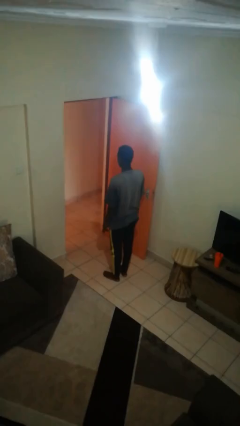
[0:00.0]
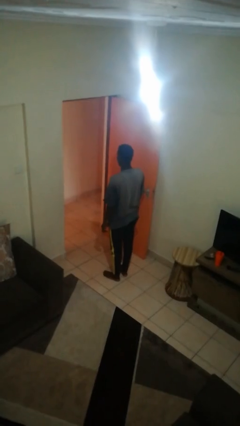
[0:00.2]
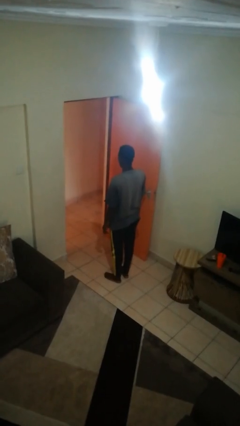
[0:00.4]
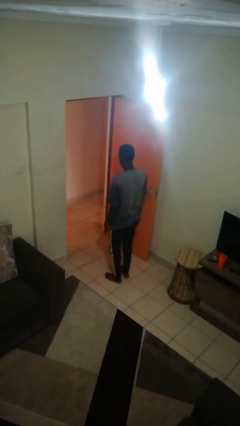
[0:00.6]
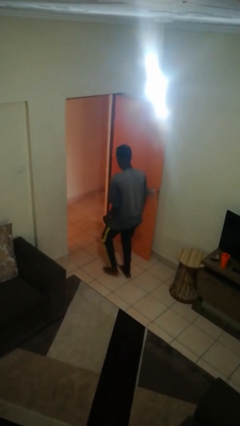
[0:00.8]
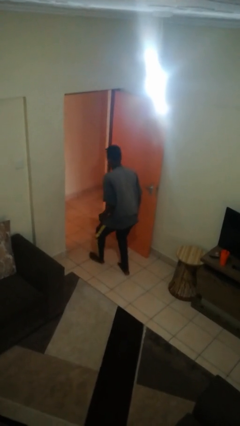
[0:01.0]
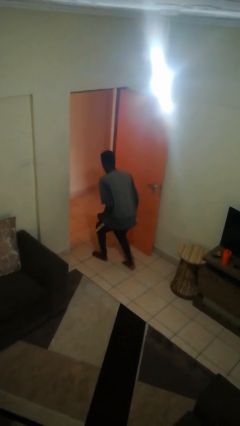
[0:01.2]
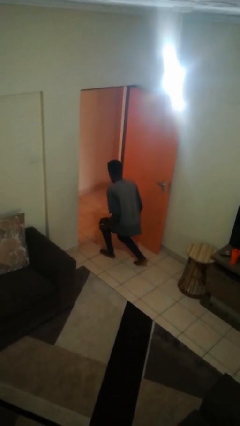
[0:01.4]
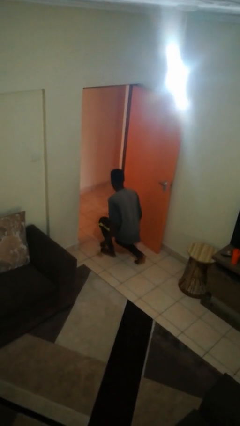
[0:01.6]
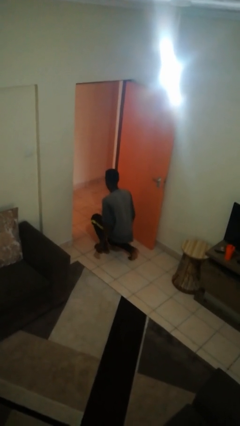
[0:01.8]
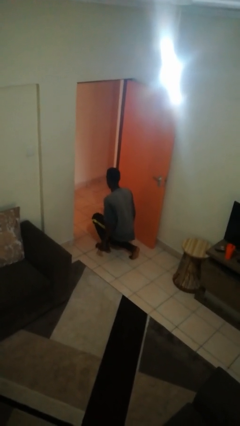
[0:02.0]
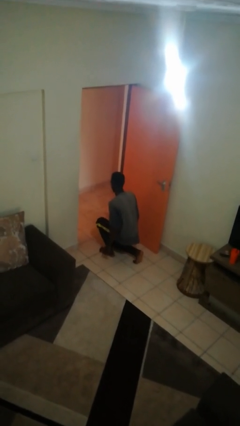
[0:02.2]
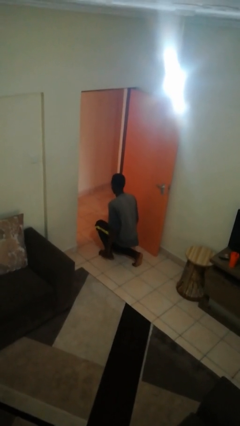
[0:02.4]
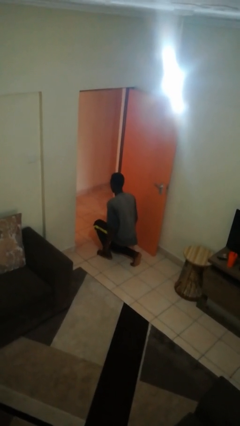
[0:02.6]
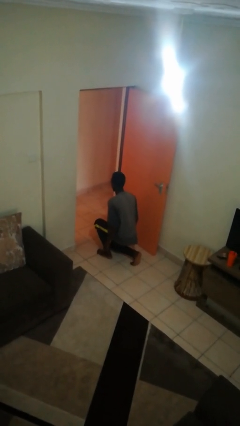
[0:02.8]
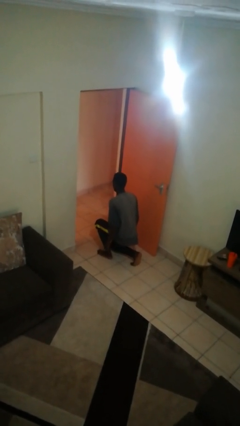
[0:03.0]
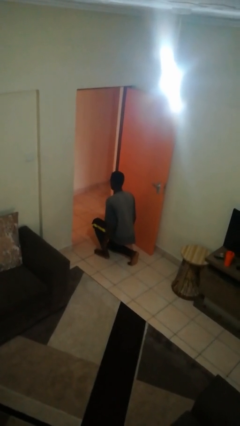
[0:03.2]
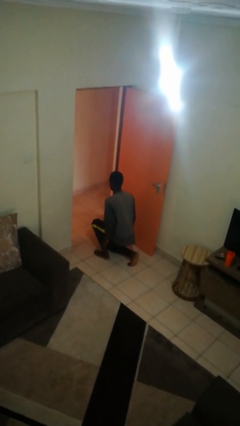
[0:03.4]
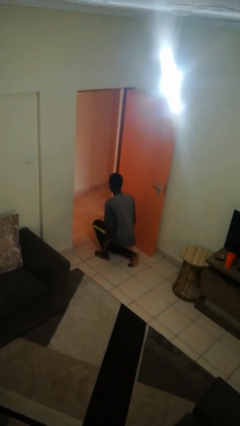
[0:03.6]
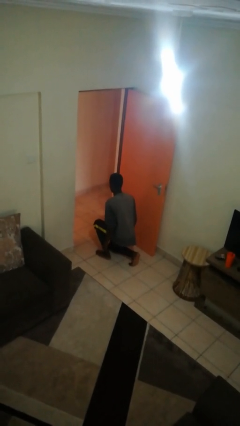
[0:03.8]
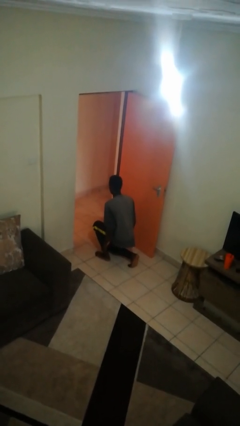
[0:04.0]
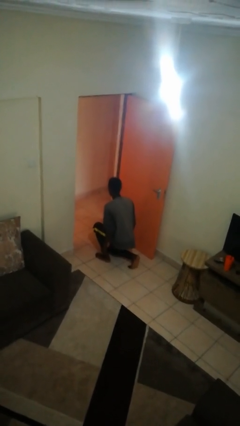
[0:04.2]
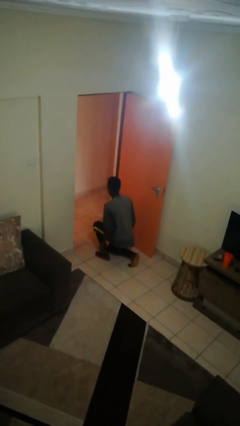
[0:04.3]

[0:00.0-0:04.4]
person kneels

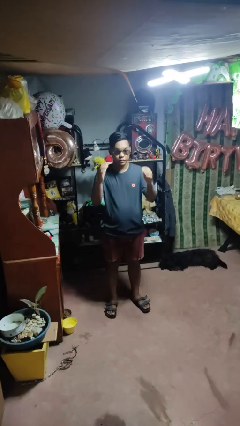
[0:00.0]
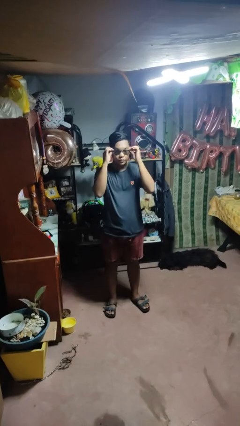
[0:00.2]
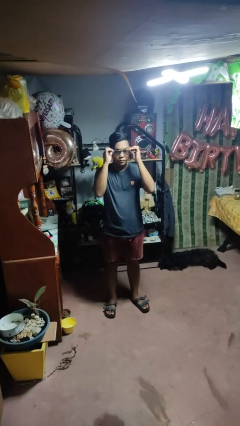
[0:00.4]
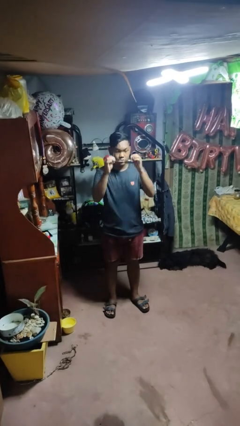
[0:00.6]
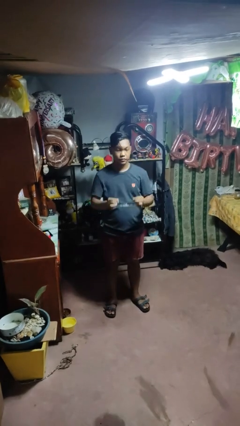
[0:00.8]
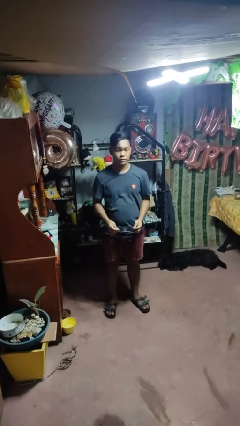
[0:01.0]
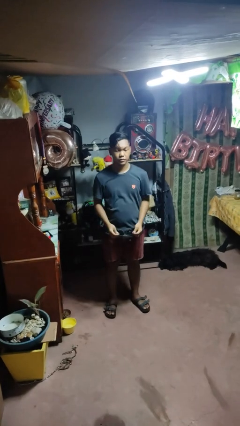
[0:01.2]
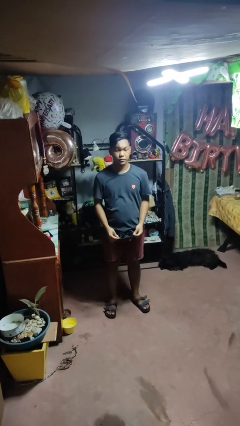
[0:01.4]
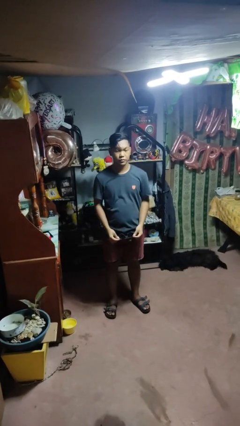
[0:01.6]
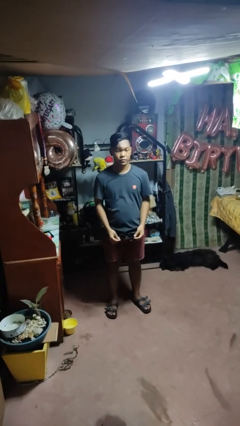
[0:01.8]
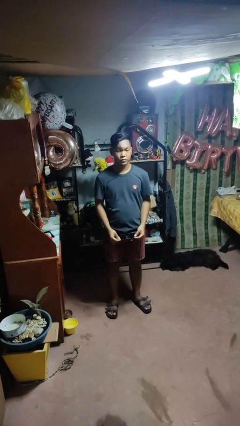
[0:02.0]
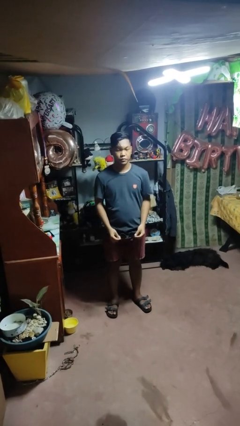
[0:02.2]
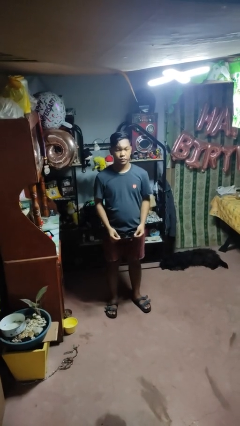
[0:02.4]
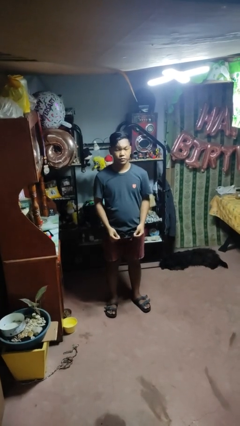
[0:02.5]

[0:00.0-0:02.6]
person takes off sunglasses

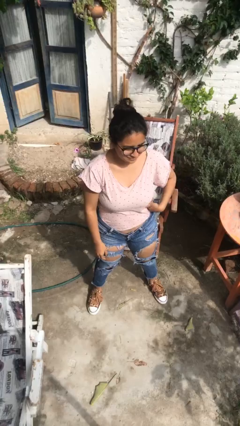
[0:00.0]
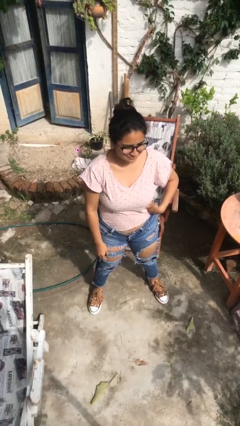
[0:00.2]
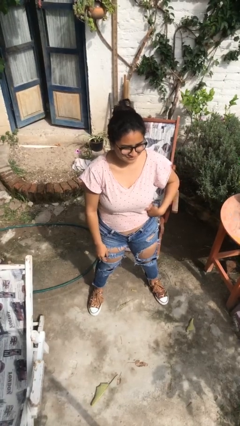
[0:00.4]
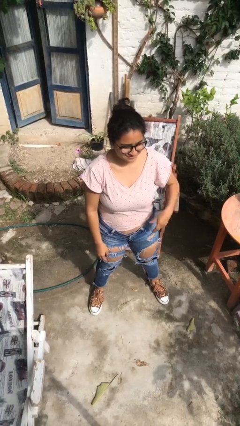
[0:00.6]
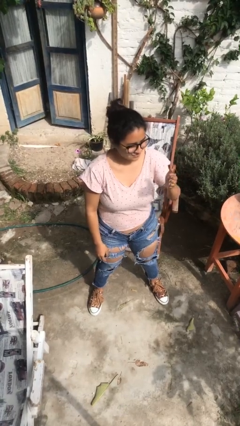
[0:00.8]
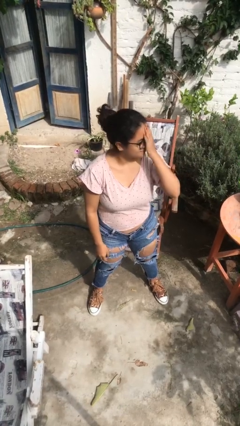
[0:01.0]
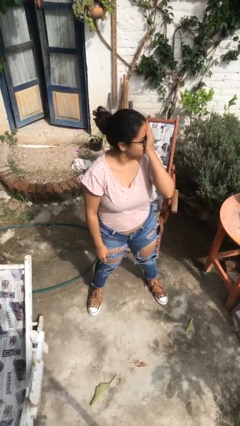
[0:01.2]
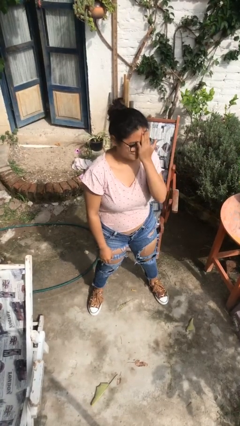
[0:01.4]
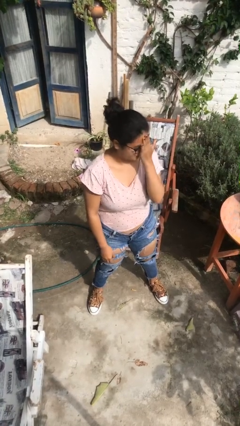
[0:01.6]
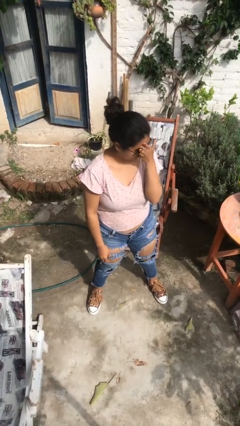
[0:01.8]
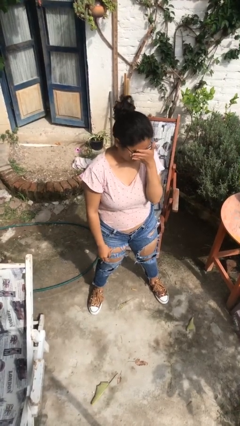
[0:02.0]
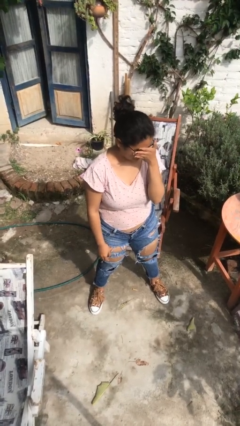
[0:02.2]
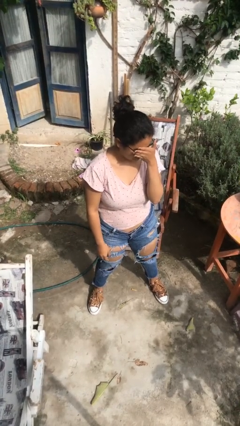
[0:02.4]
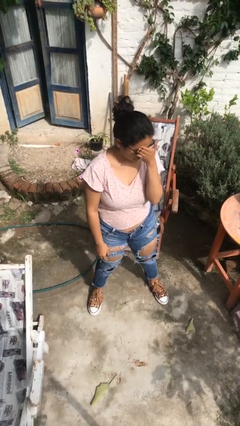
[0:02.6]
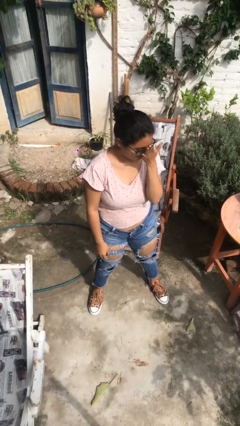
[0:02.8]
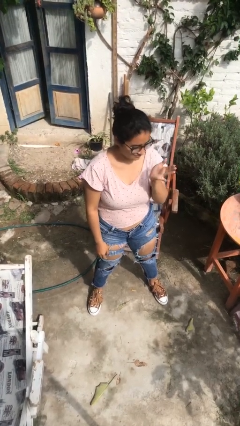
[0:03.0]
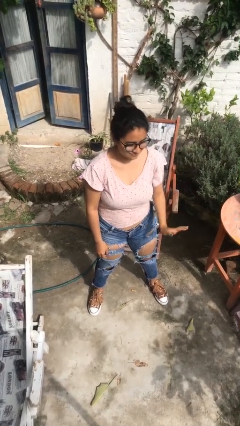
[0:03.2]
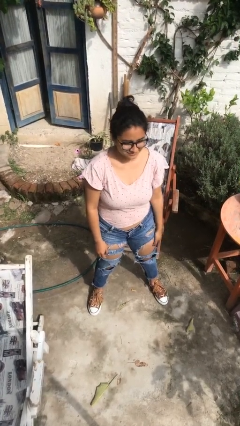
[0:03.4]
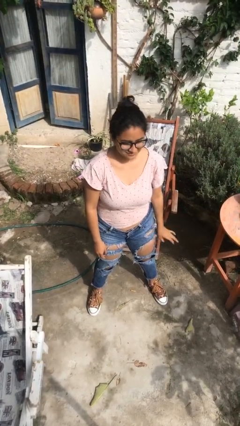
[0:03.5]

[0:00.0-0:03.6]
person covers face with hands

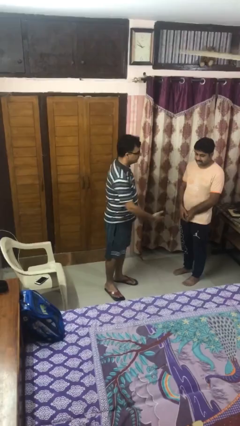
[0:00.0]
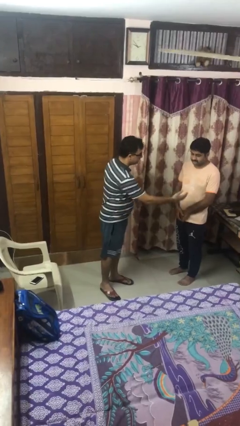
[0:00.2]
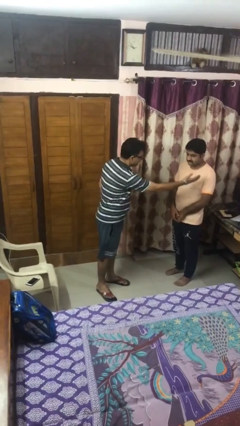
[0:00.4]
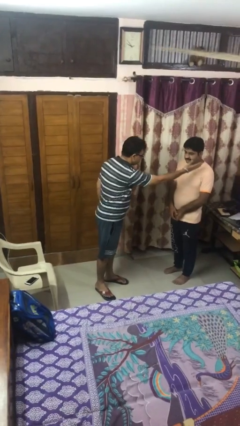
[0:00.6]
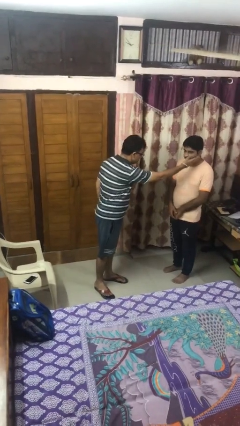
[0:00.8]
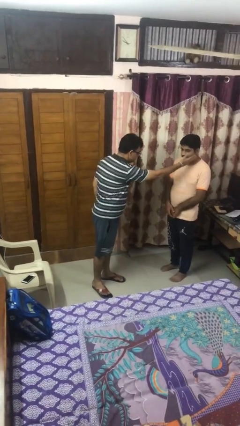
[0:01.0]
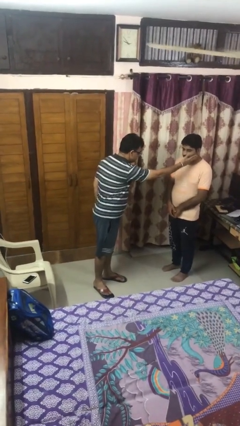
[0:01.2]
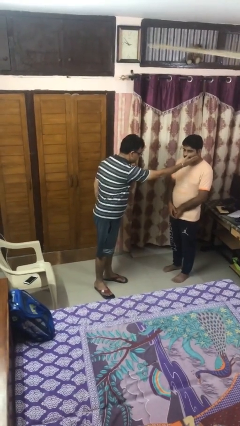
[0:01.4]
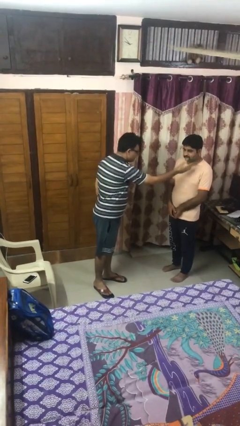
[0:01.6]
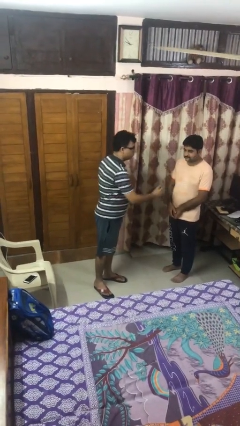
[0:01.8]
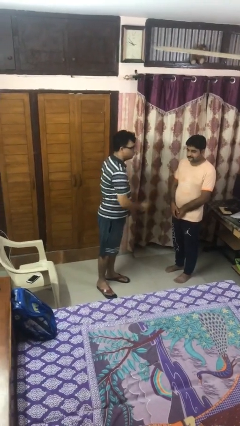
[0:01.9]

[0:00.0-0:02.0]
person touches face of person

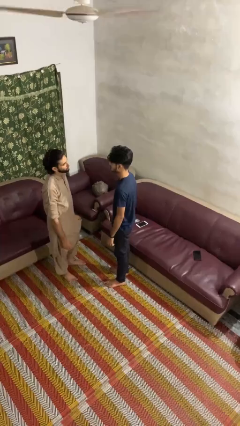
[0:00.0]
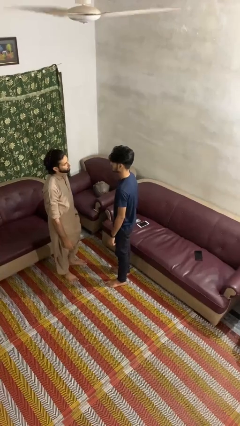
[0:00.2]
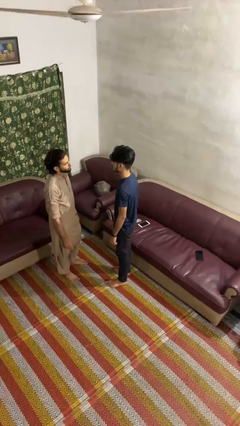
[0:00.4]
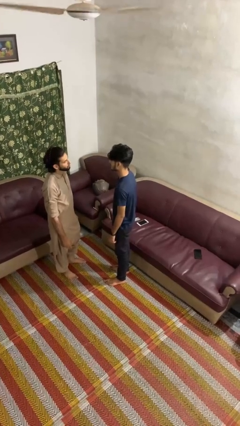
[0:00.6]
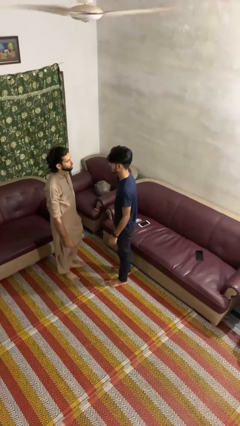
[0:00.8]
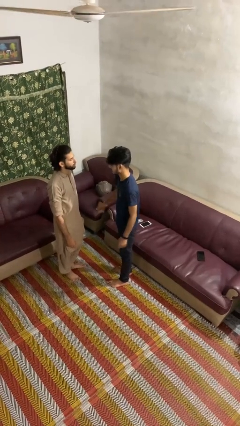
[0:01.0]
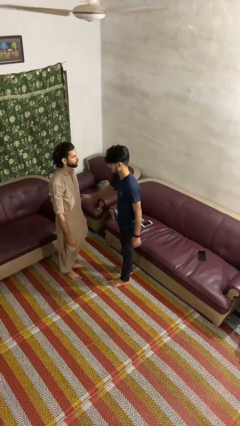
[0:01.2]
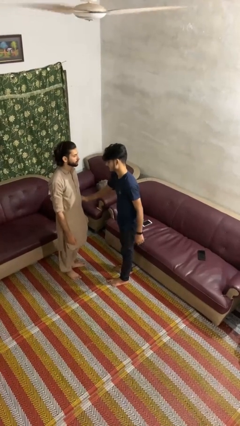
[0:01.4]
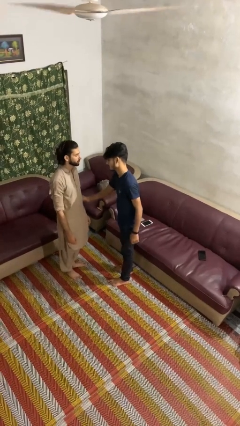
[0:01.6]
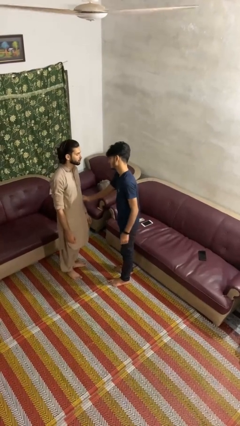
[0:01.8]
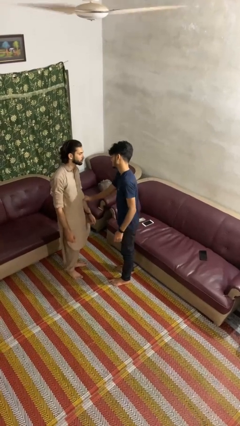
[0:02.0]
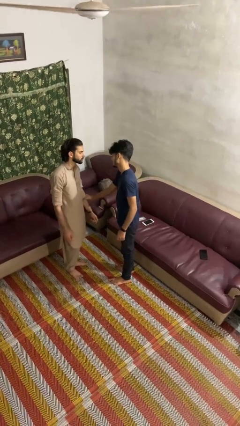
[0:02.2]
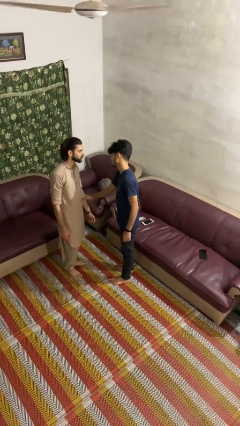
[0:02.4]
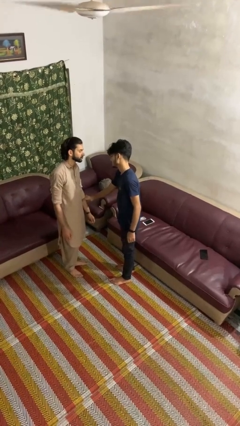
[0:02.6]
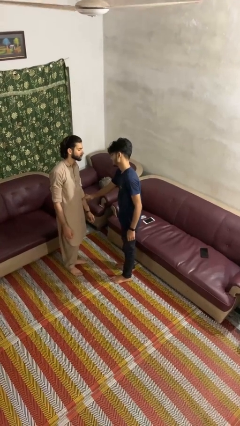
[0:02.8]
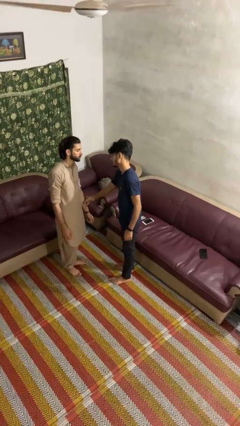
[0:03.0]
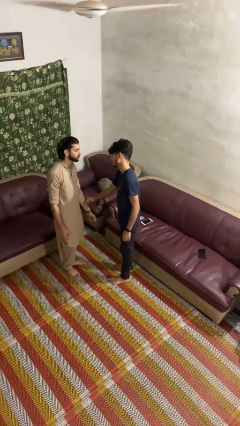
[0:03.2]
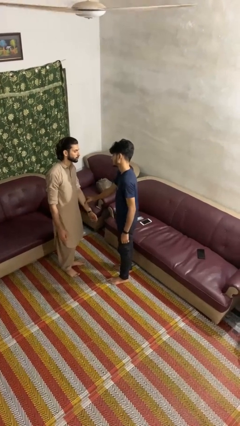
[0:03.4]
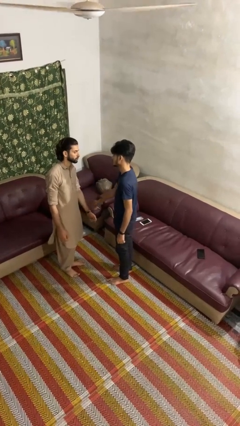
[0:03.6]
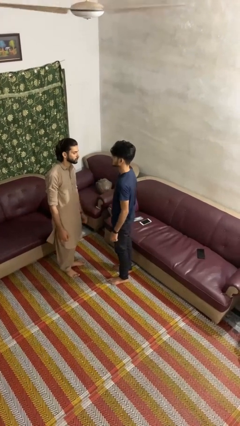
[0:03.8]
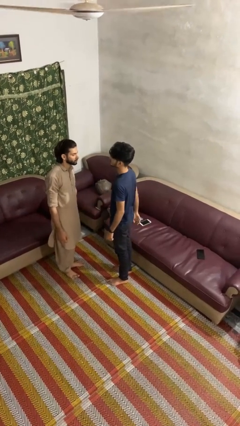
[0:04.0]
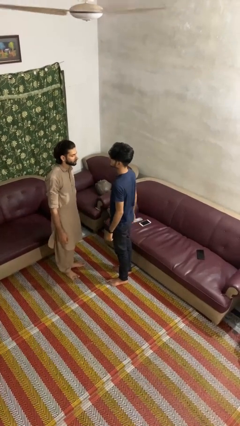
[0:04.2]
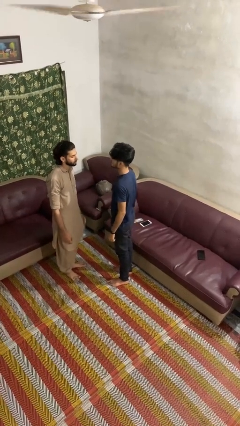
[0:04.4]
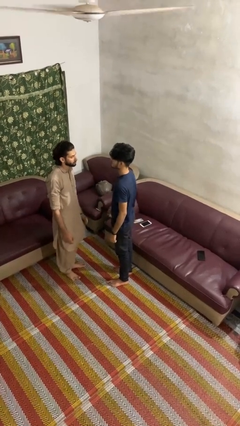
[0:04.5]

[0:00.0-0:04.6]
person grabs person by forearm
